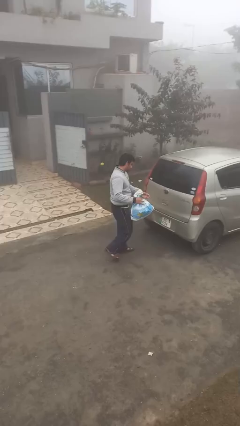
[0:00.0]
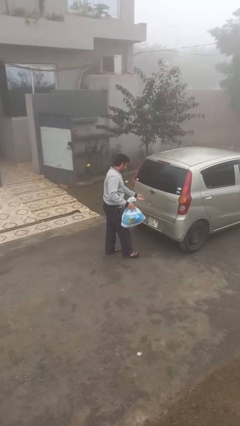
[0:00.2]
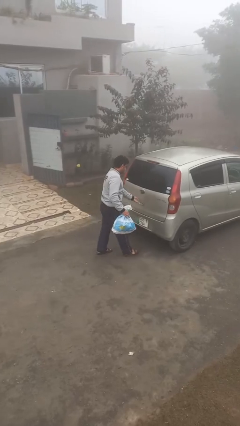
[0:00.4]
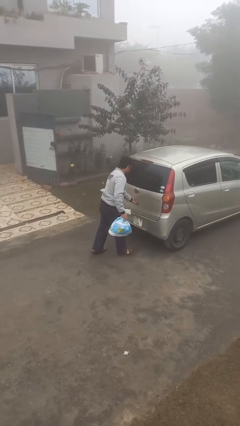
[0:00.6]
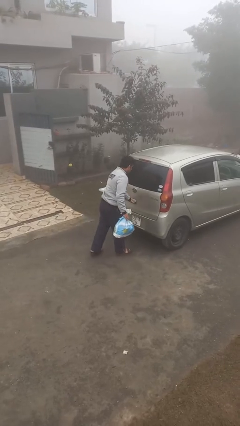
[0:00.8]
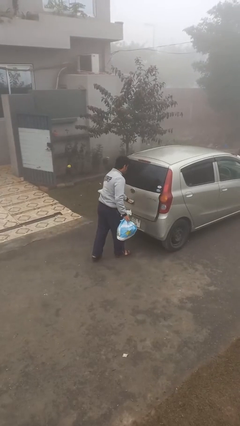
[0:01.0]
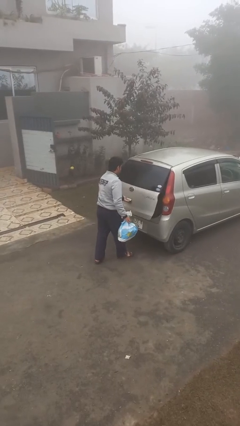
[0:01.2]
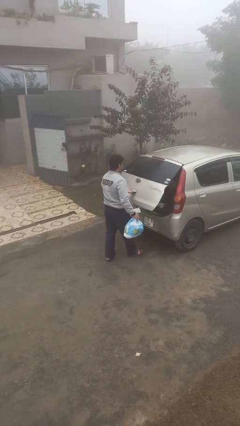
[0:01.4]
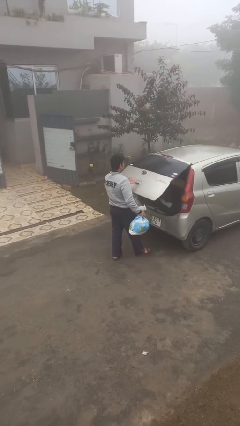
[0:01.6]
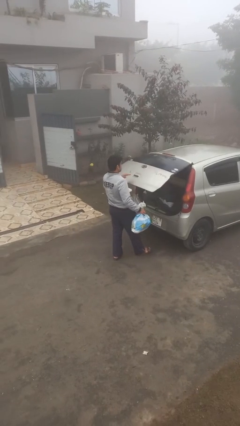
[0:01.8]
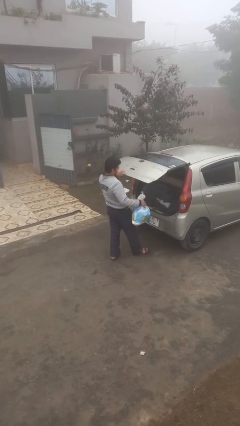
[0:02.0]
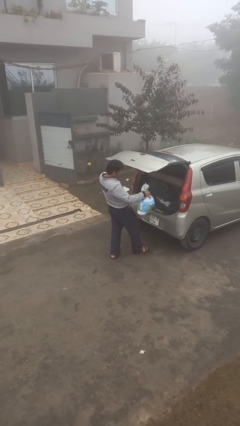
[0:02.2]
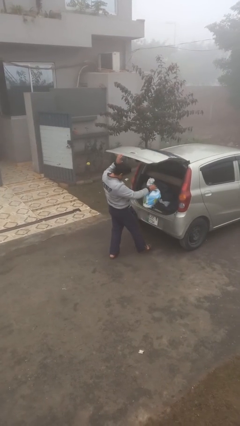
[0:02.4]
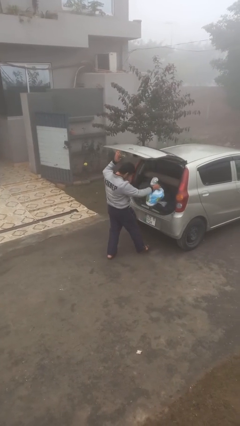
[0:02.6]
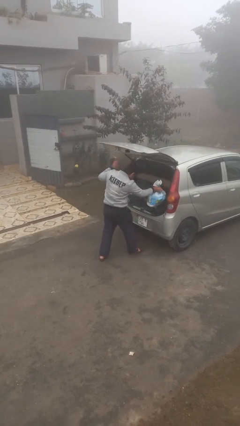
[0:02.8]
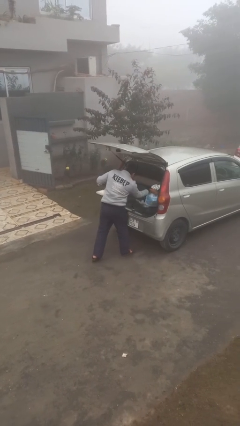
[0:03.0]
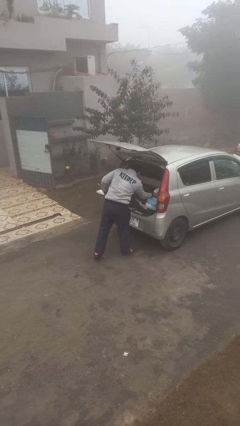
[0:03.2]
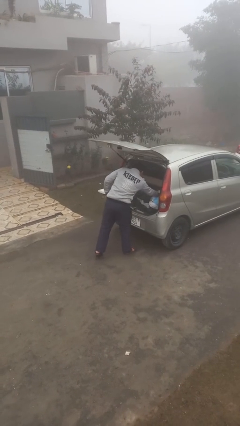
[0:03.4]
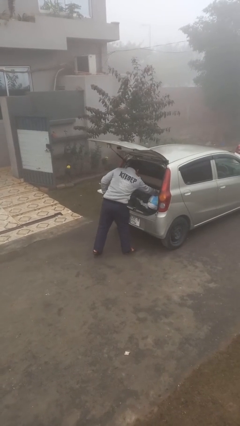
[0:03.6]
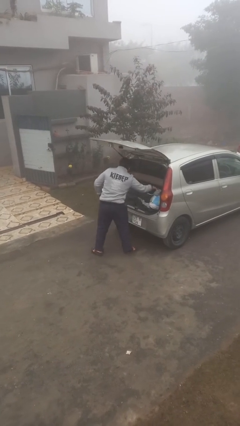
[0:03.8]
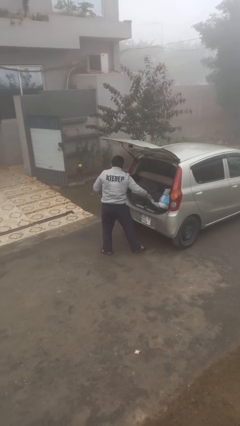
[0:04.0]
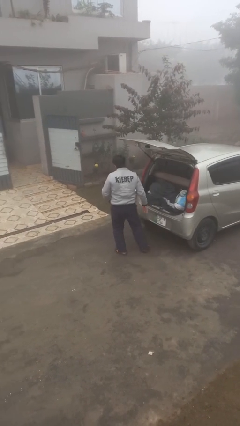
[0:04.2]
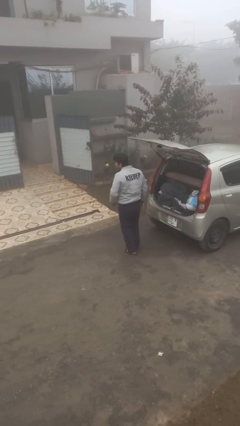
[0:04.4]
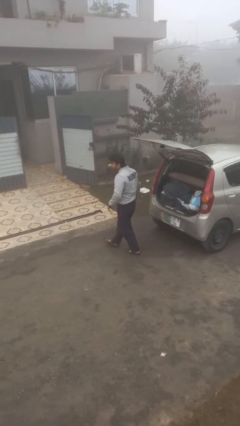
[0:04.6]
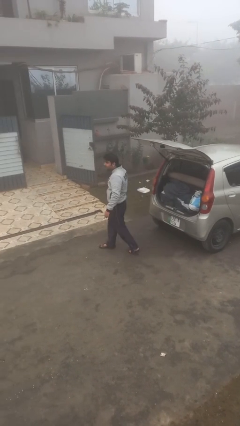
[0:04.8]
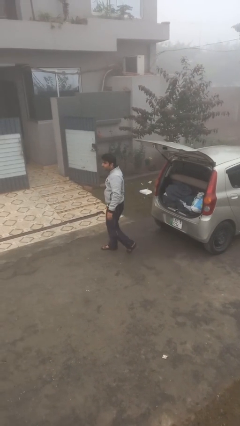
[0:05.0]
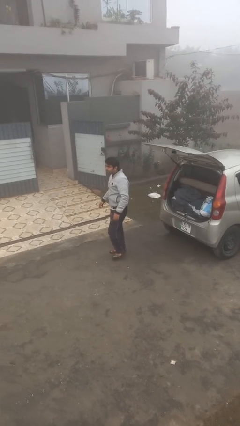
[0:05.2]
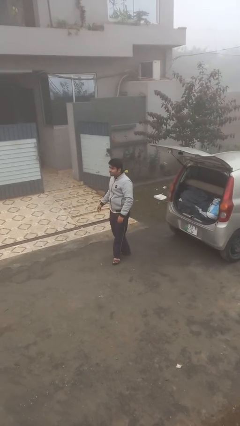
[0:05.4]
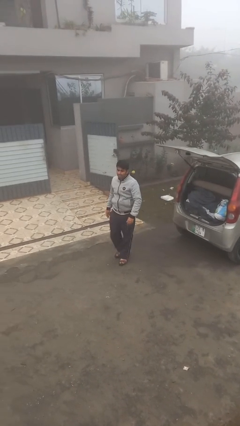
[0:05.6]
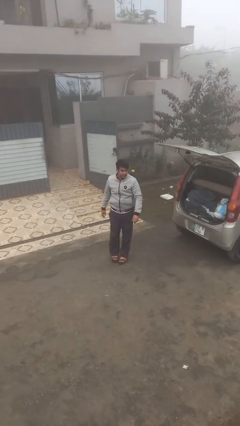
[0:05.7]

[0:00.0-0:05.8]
person loads car

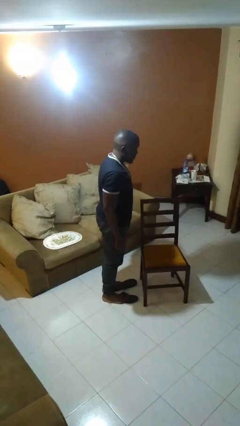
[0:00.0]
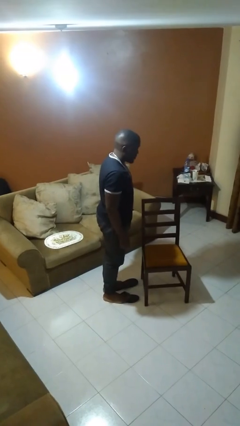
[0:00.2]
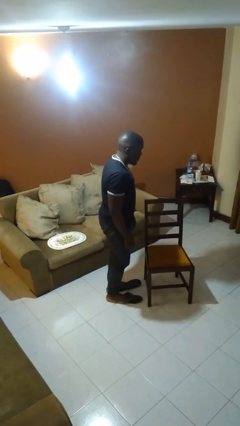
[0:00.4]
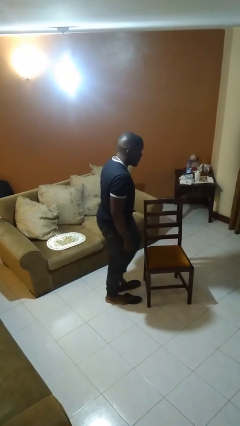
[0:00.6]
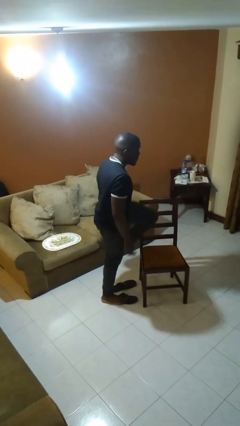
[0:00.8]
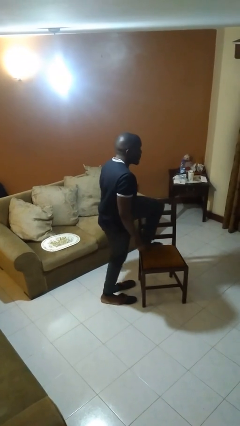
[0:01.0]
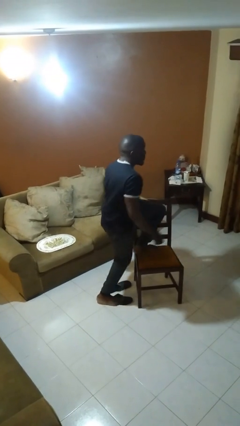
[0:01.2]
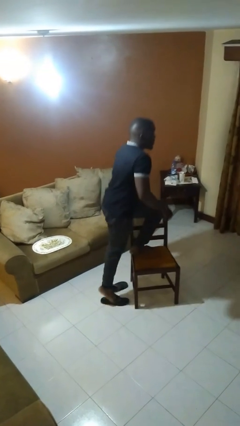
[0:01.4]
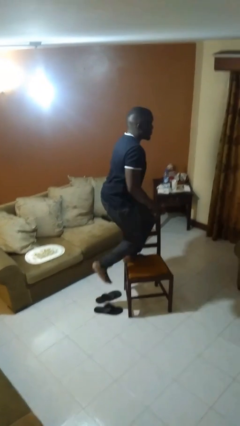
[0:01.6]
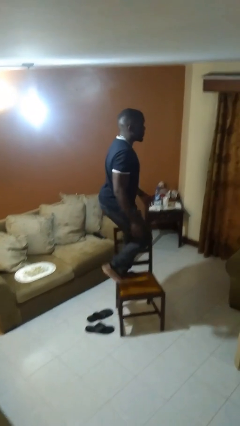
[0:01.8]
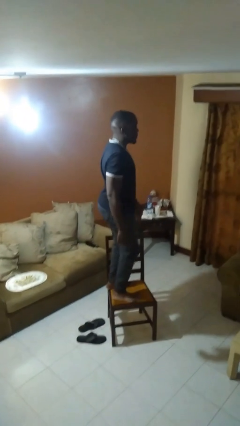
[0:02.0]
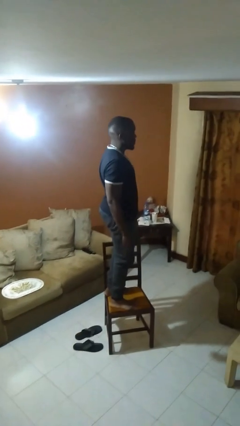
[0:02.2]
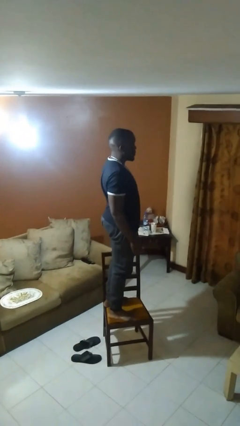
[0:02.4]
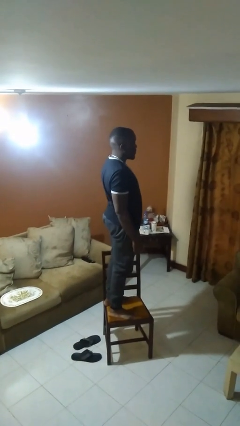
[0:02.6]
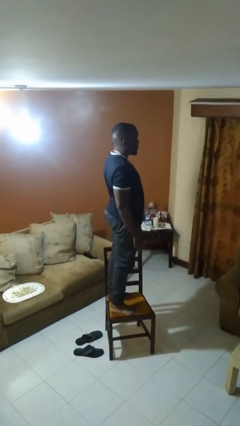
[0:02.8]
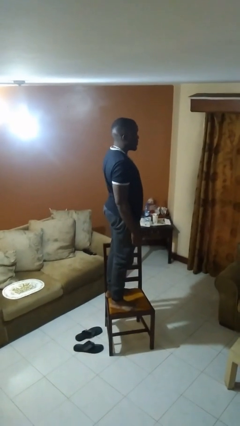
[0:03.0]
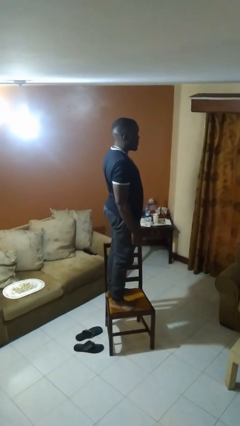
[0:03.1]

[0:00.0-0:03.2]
person climbs on chair

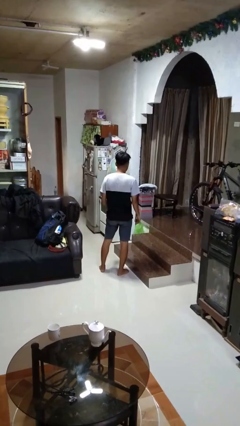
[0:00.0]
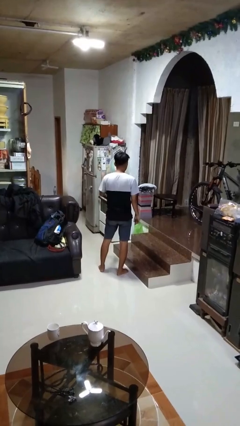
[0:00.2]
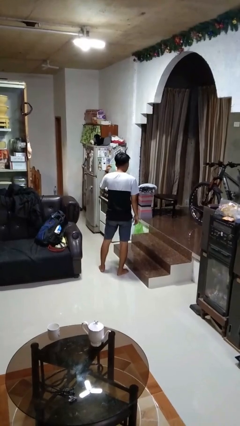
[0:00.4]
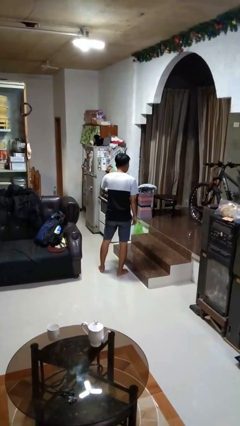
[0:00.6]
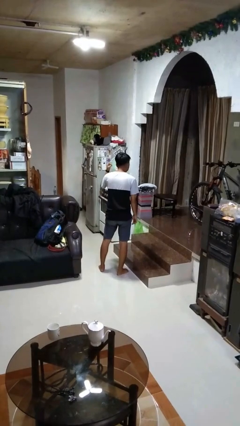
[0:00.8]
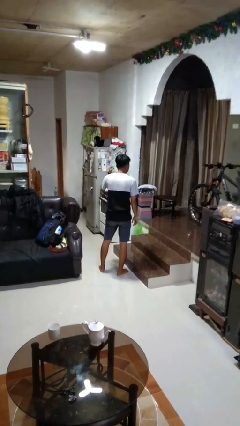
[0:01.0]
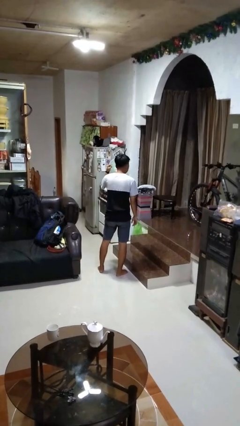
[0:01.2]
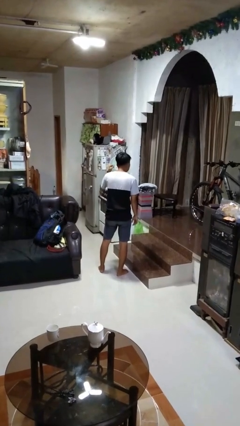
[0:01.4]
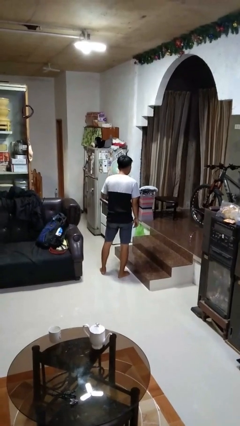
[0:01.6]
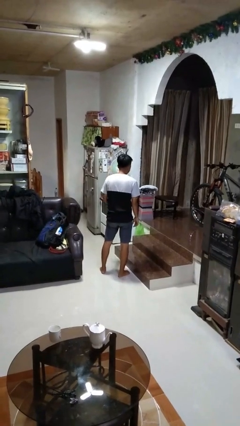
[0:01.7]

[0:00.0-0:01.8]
person gestures listen closely

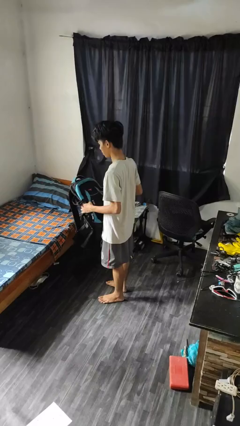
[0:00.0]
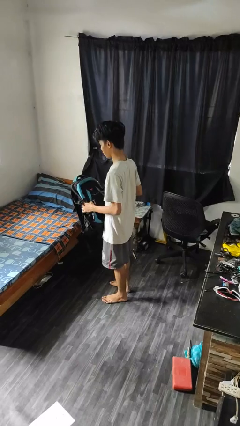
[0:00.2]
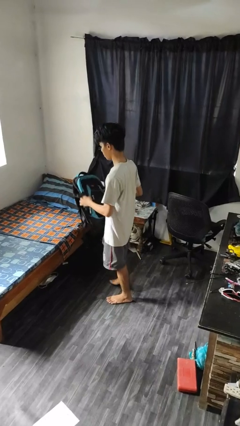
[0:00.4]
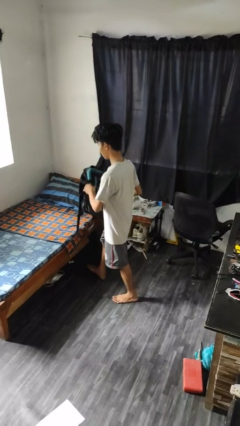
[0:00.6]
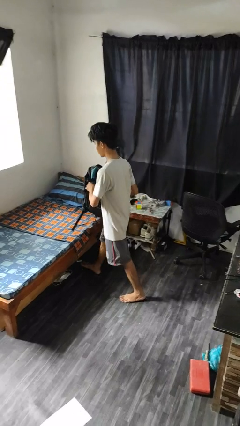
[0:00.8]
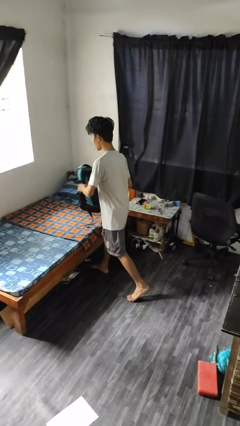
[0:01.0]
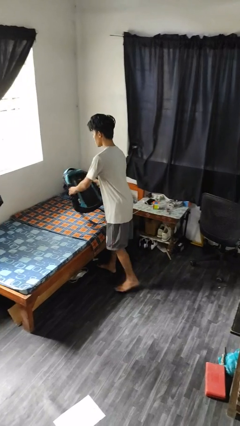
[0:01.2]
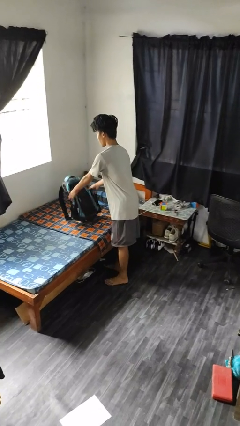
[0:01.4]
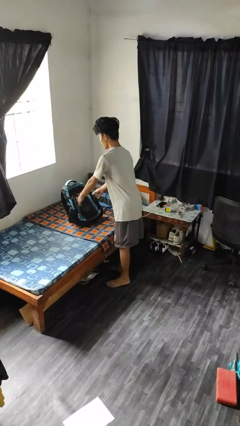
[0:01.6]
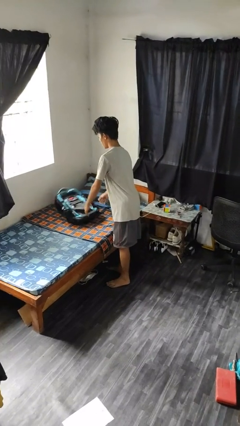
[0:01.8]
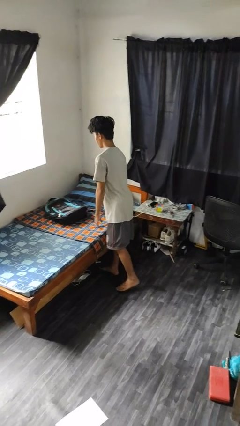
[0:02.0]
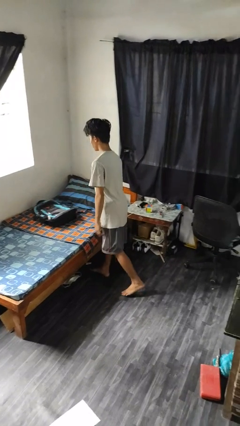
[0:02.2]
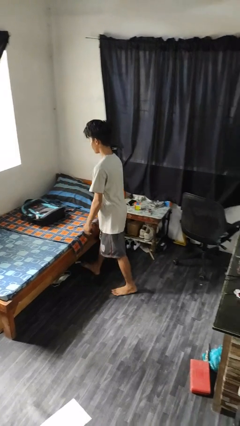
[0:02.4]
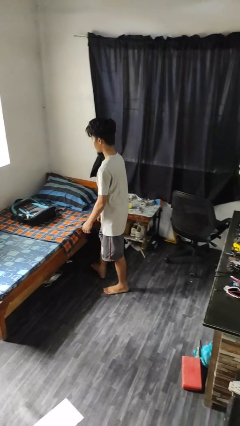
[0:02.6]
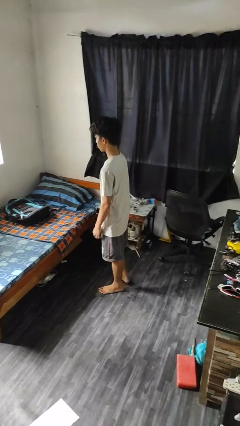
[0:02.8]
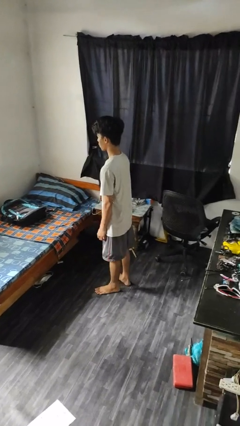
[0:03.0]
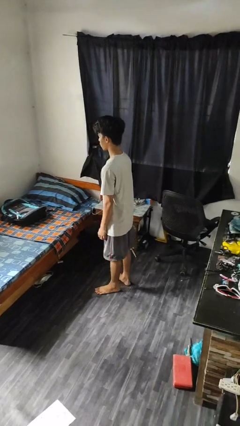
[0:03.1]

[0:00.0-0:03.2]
person puts down object on bed

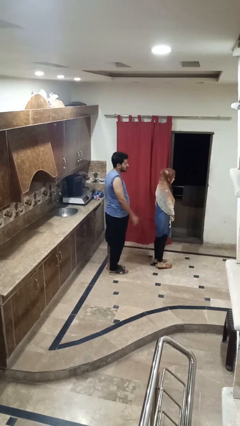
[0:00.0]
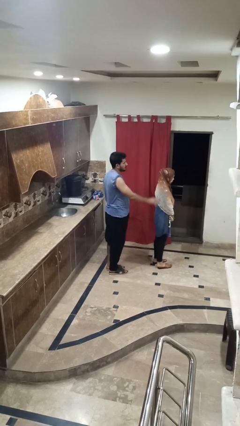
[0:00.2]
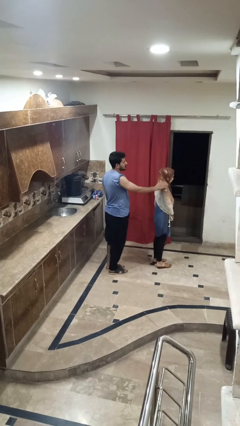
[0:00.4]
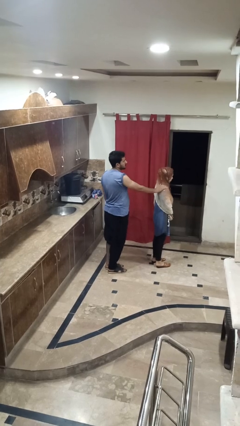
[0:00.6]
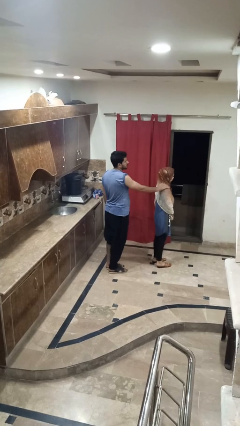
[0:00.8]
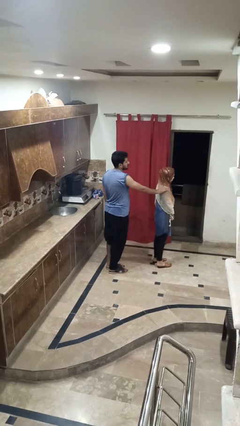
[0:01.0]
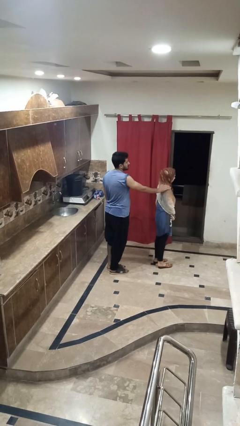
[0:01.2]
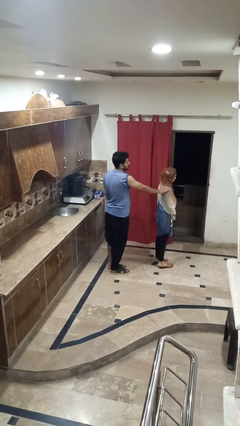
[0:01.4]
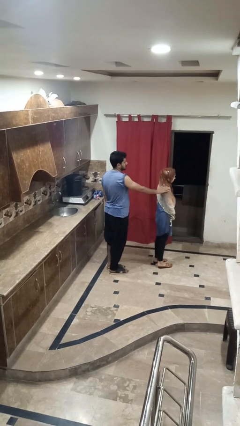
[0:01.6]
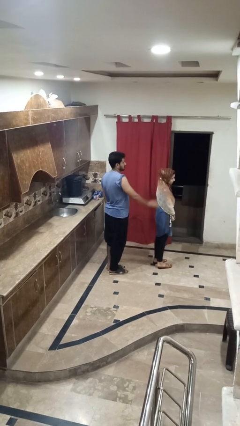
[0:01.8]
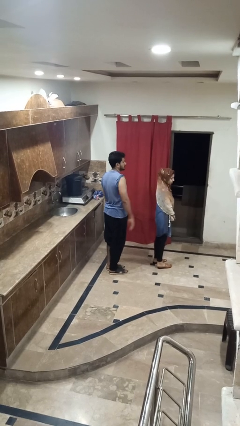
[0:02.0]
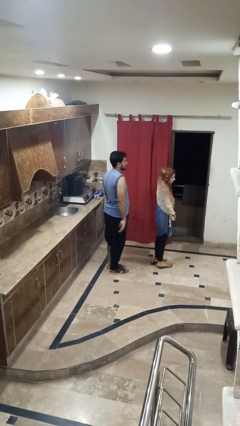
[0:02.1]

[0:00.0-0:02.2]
person touches back of person

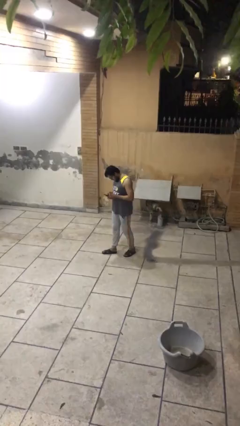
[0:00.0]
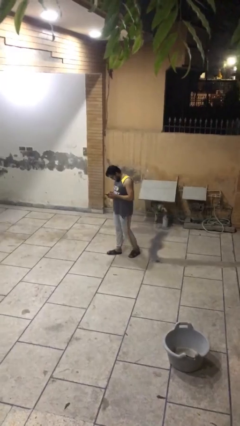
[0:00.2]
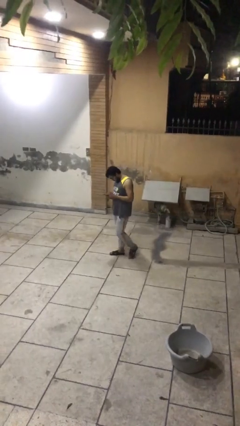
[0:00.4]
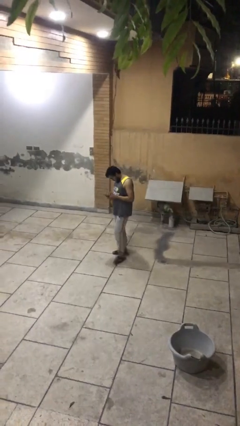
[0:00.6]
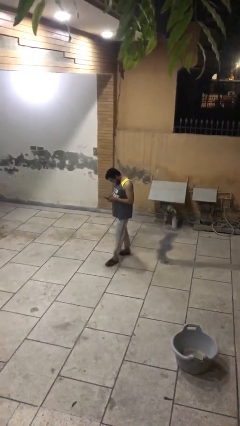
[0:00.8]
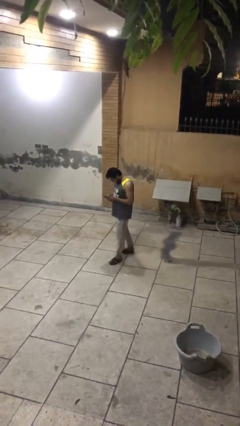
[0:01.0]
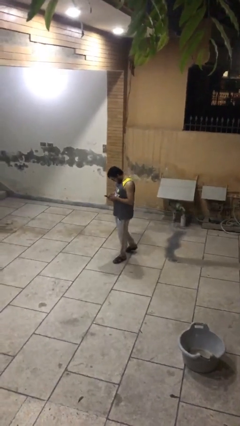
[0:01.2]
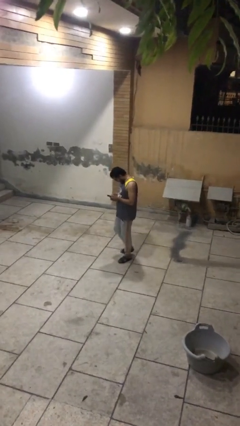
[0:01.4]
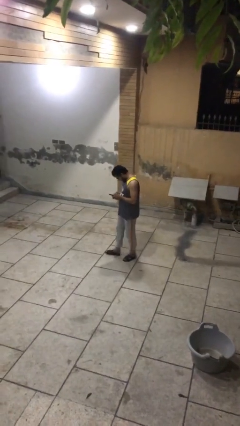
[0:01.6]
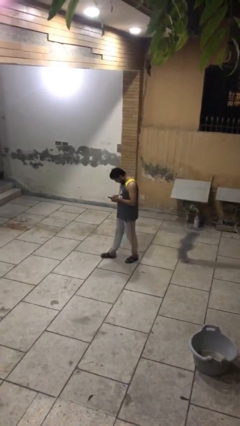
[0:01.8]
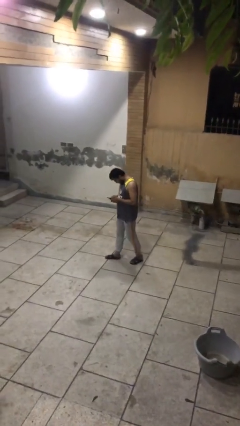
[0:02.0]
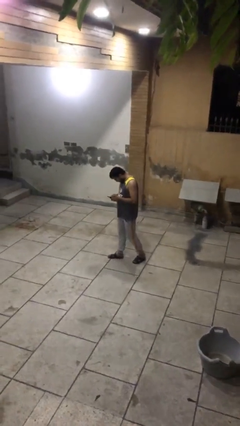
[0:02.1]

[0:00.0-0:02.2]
person texts on phone
